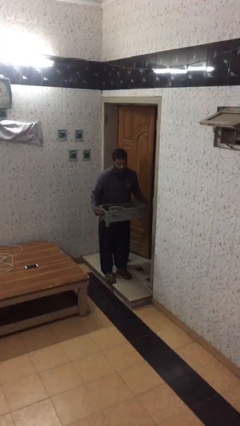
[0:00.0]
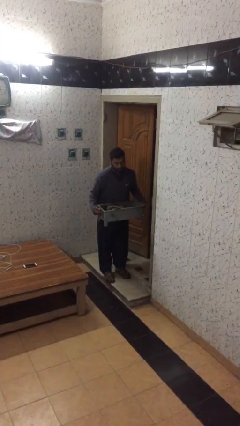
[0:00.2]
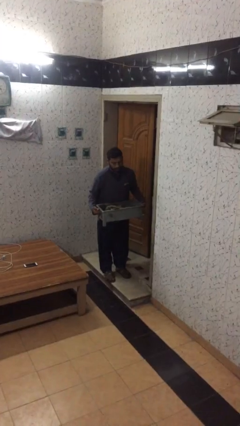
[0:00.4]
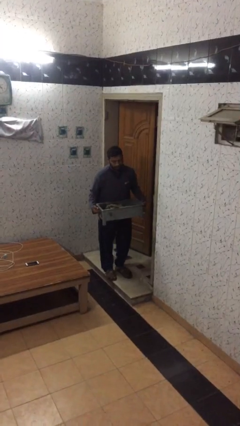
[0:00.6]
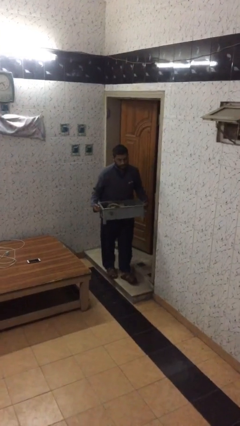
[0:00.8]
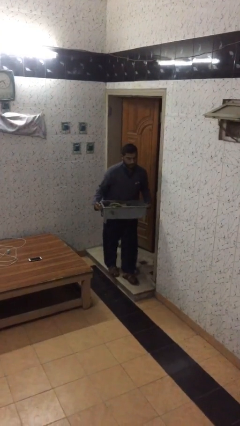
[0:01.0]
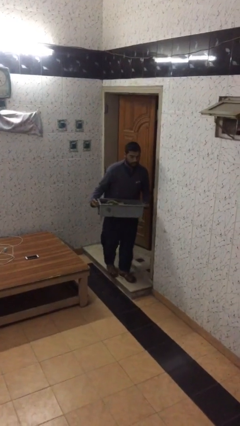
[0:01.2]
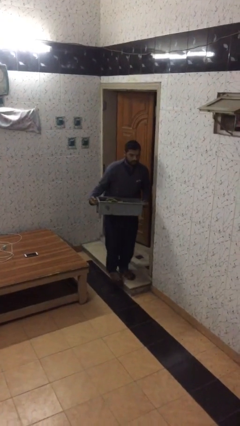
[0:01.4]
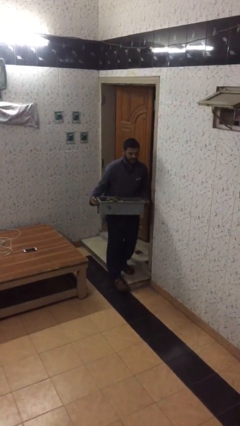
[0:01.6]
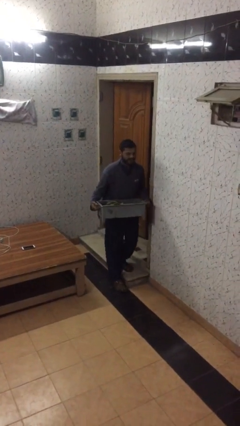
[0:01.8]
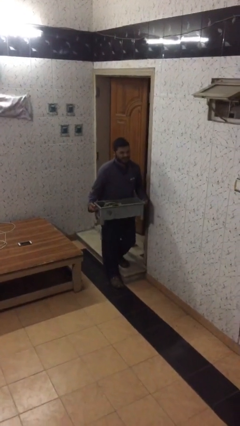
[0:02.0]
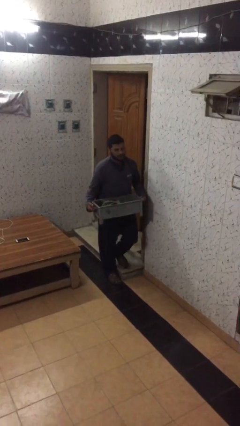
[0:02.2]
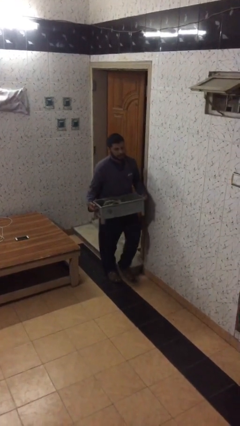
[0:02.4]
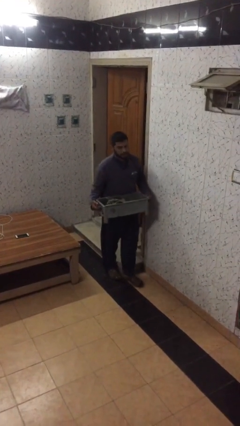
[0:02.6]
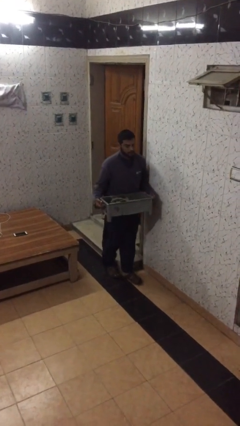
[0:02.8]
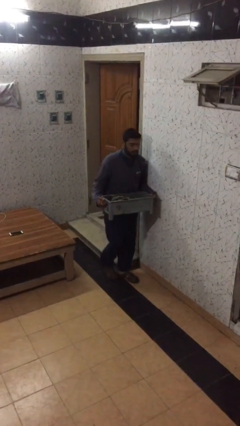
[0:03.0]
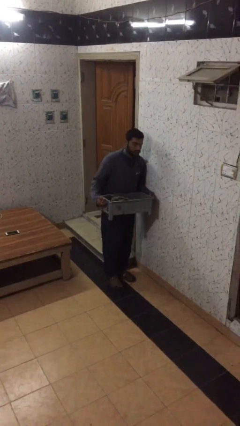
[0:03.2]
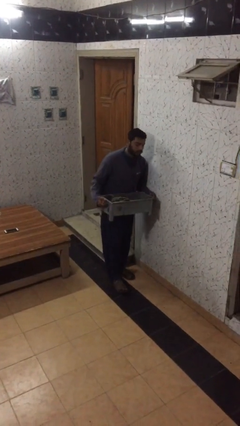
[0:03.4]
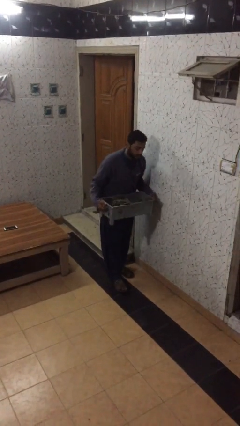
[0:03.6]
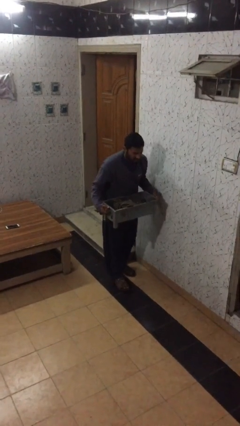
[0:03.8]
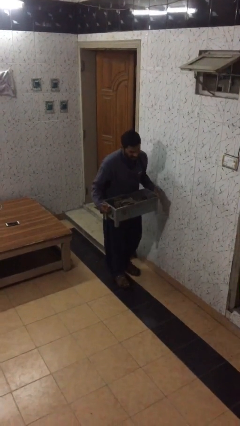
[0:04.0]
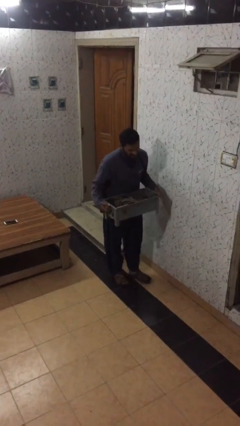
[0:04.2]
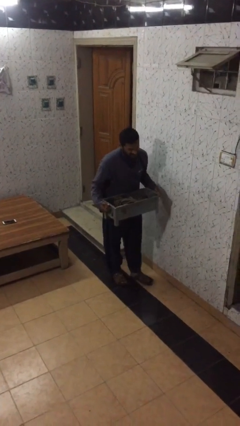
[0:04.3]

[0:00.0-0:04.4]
person carries heavy object

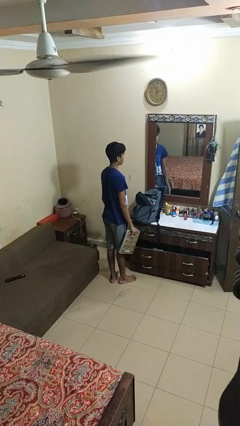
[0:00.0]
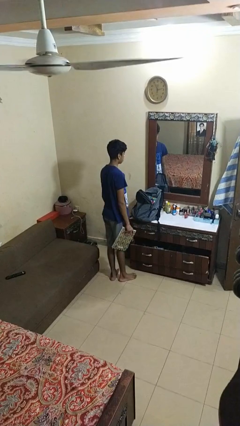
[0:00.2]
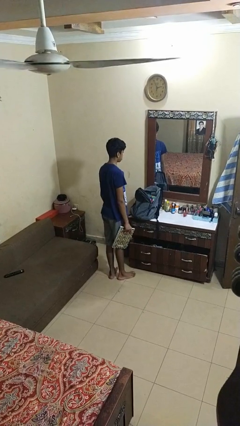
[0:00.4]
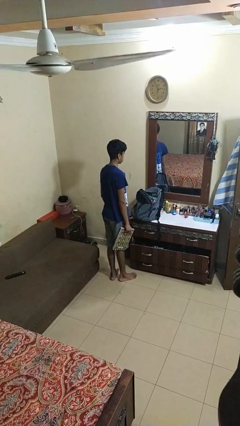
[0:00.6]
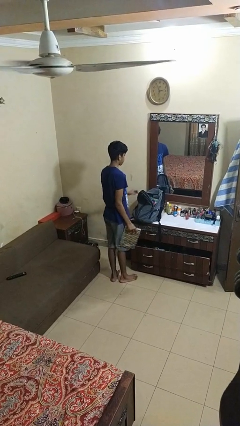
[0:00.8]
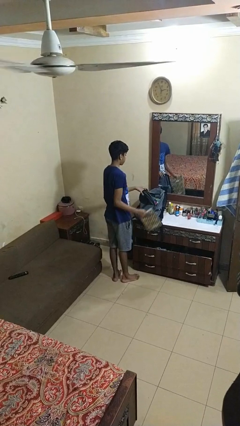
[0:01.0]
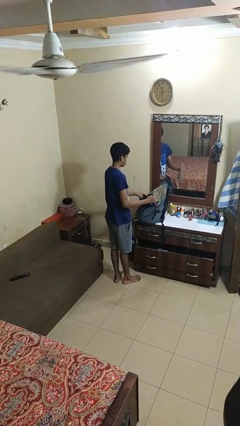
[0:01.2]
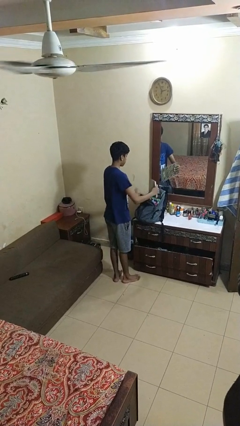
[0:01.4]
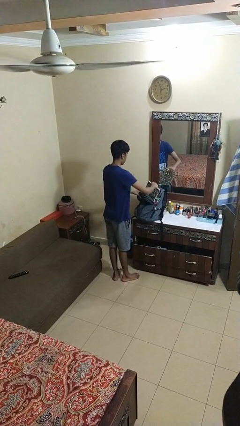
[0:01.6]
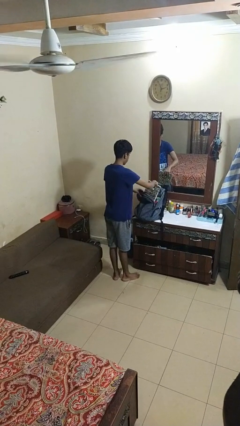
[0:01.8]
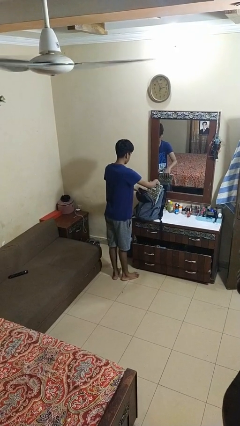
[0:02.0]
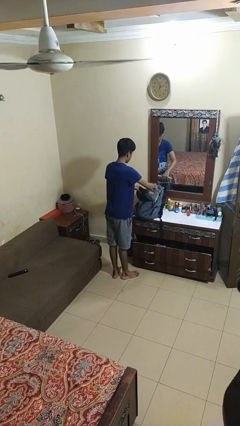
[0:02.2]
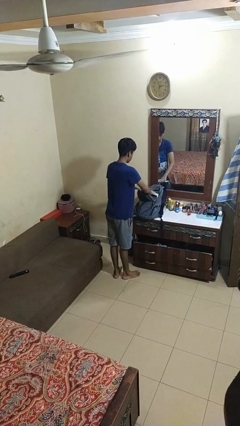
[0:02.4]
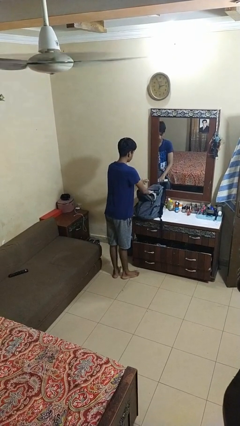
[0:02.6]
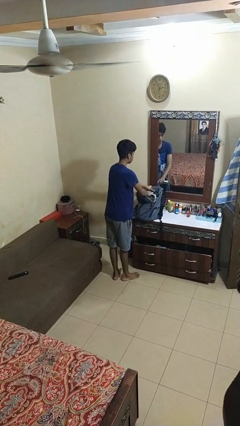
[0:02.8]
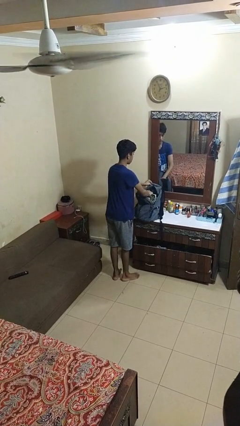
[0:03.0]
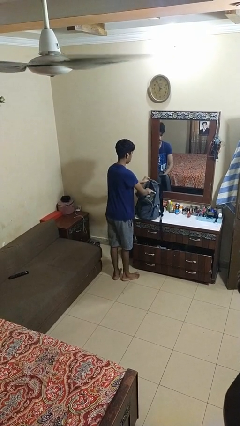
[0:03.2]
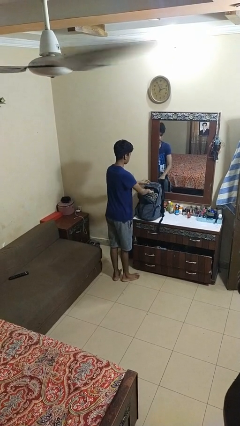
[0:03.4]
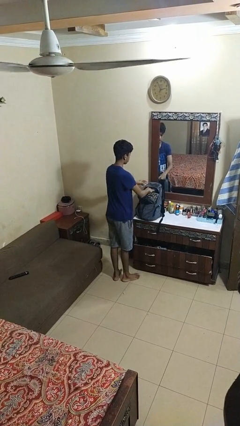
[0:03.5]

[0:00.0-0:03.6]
person puts object into bag

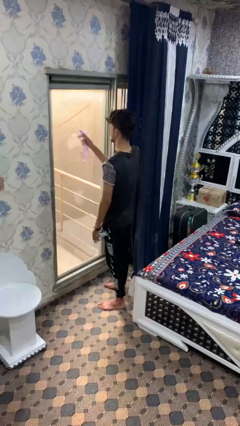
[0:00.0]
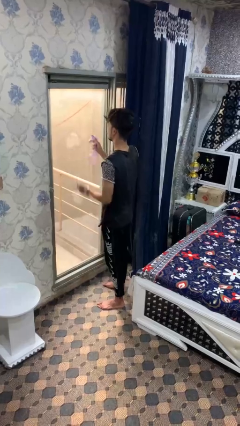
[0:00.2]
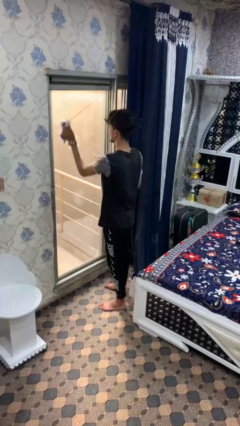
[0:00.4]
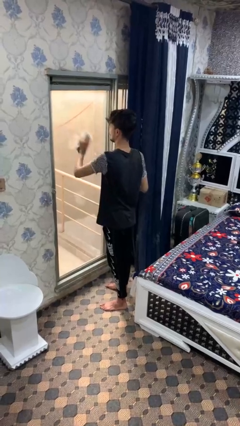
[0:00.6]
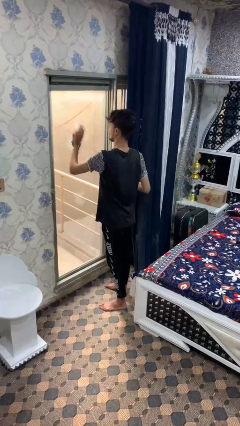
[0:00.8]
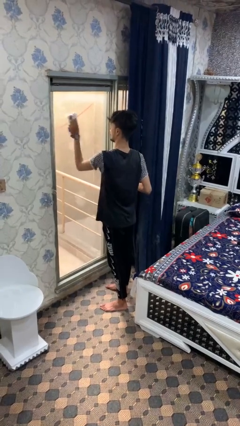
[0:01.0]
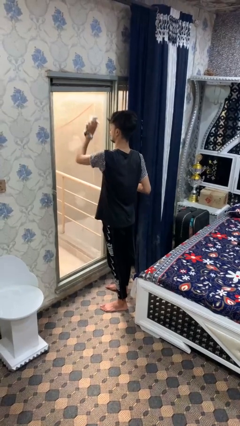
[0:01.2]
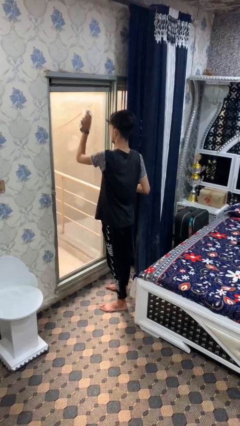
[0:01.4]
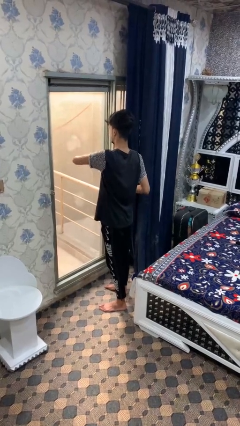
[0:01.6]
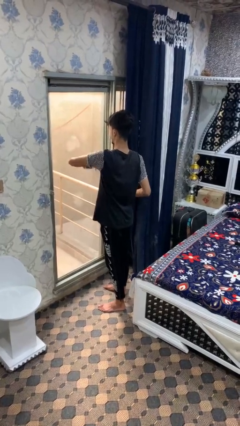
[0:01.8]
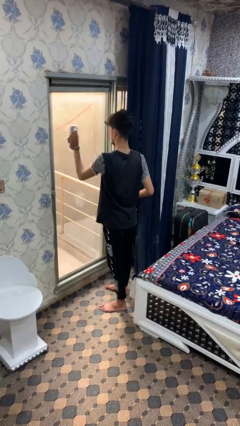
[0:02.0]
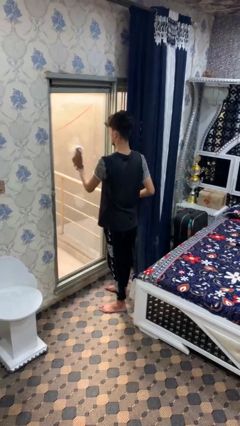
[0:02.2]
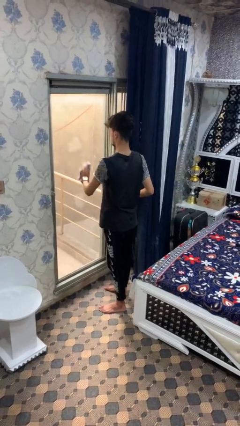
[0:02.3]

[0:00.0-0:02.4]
person washes window

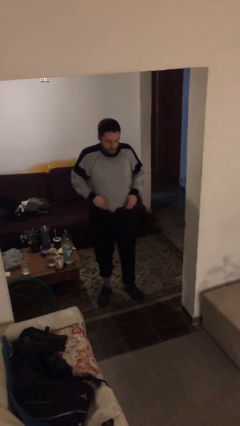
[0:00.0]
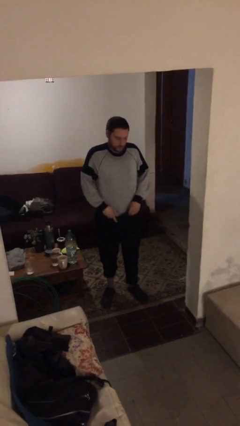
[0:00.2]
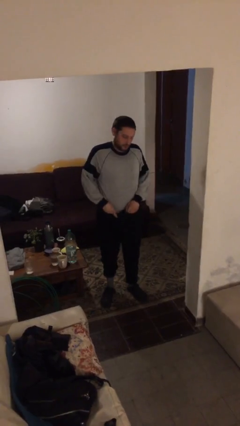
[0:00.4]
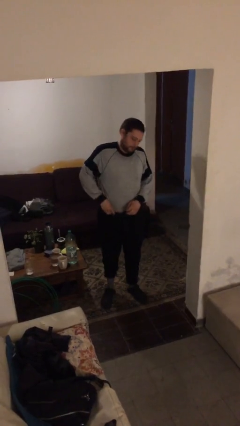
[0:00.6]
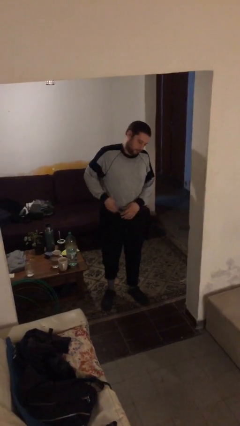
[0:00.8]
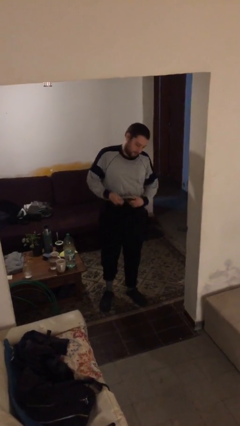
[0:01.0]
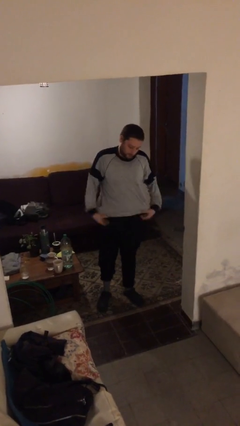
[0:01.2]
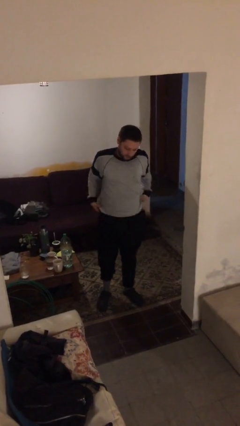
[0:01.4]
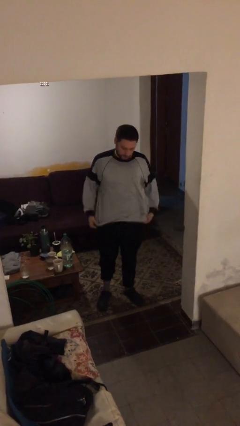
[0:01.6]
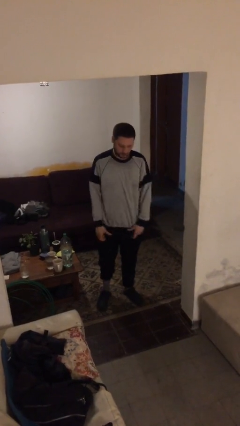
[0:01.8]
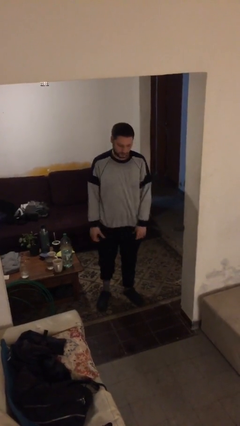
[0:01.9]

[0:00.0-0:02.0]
person untucks shirt

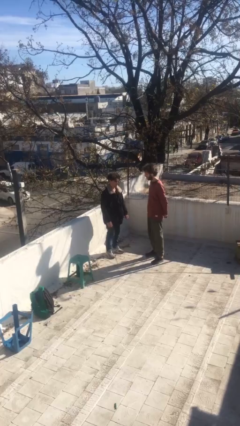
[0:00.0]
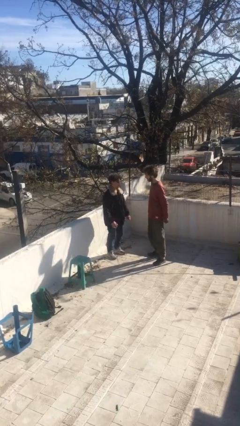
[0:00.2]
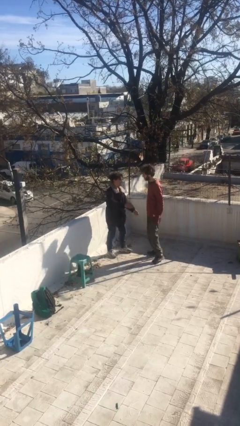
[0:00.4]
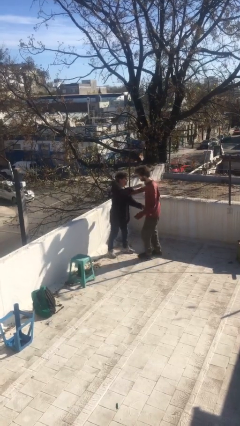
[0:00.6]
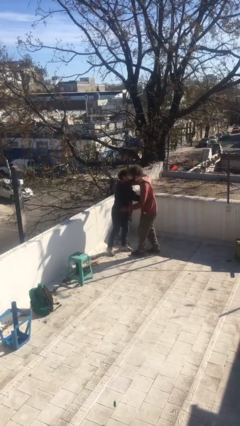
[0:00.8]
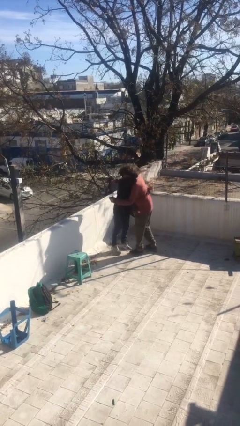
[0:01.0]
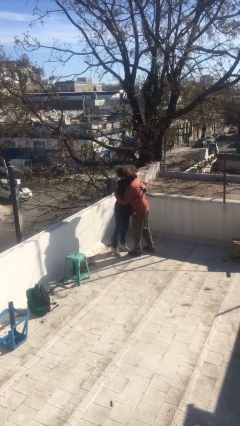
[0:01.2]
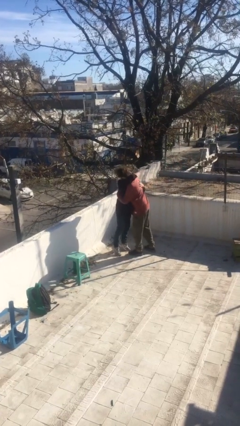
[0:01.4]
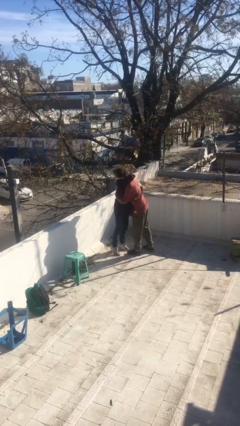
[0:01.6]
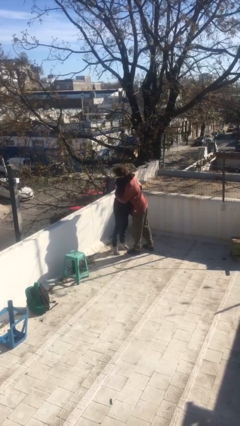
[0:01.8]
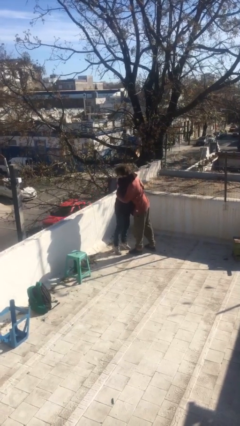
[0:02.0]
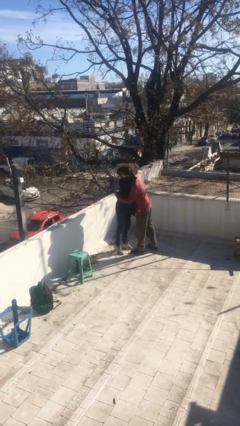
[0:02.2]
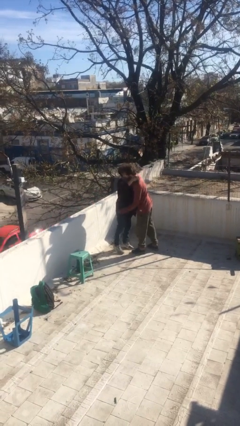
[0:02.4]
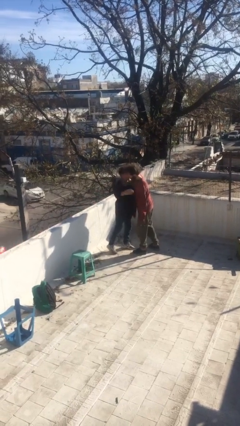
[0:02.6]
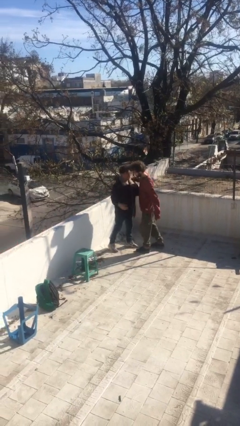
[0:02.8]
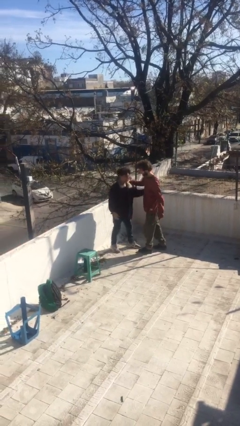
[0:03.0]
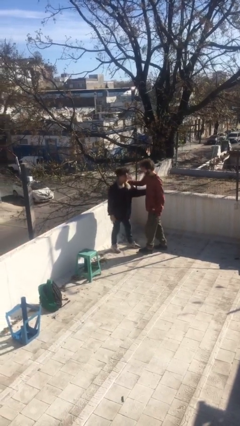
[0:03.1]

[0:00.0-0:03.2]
person embraces person

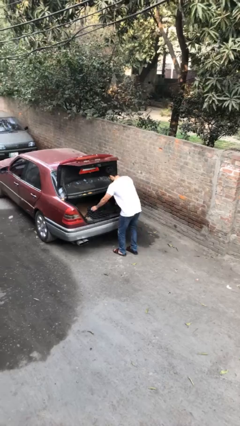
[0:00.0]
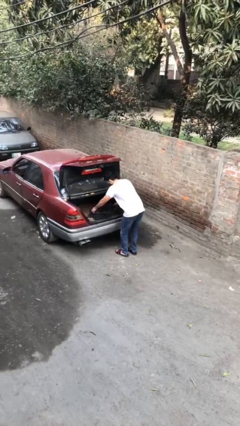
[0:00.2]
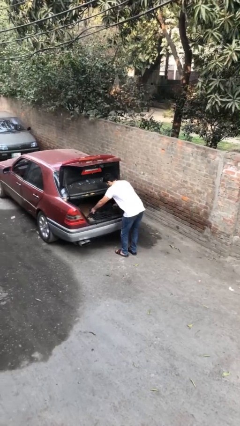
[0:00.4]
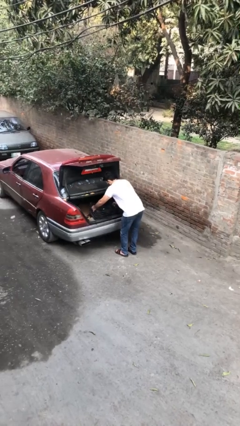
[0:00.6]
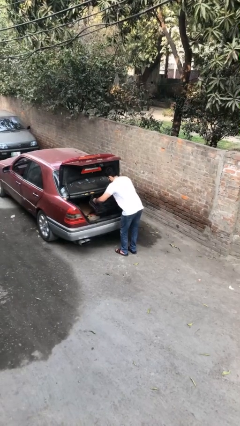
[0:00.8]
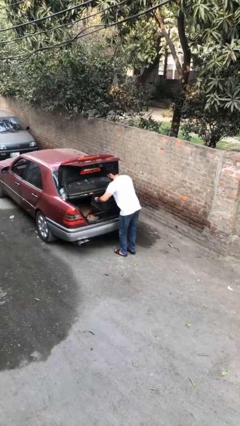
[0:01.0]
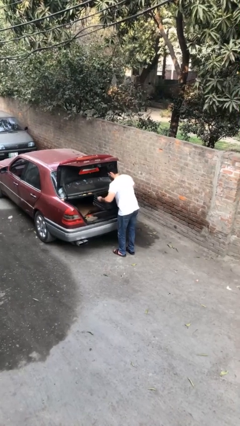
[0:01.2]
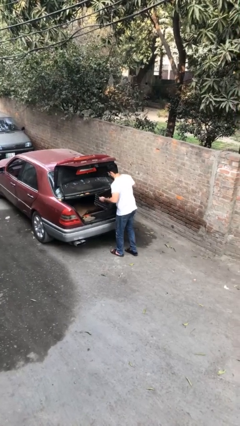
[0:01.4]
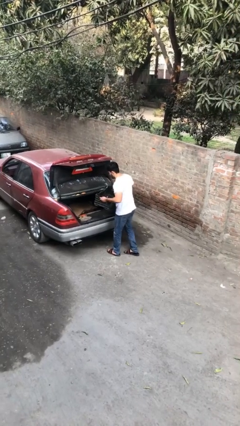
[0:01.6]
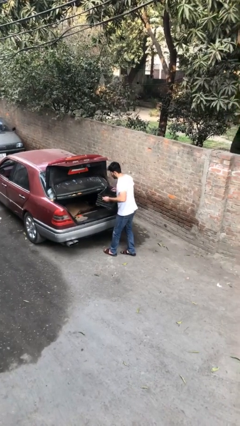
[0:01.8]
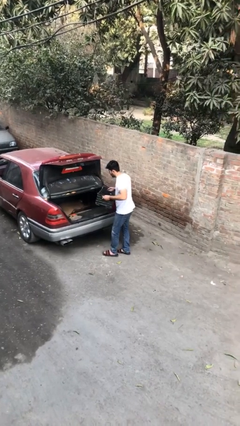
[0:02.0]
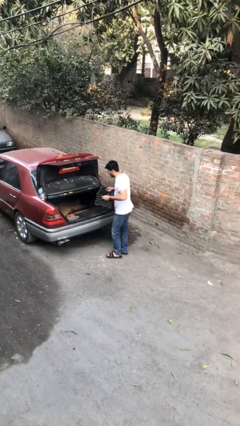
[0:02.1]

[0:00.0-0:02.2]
person unloads car
